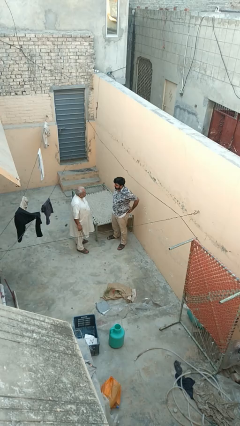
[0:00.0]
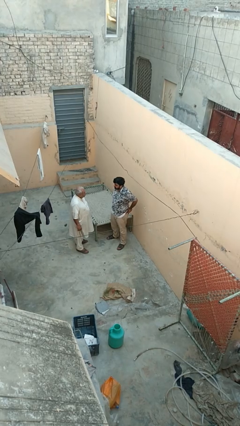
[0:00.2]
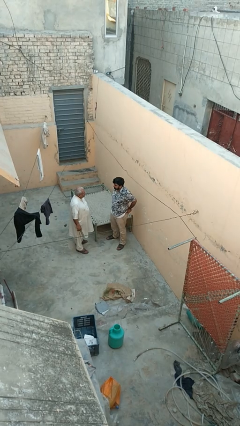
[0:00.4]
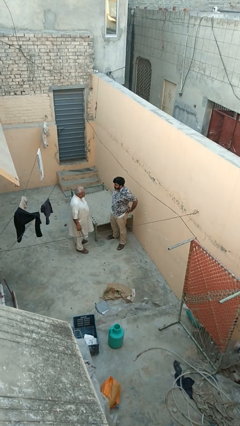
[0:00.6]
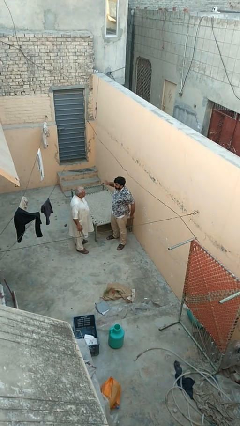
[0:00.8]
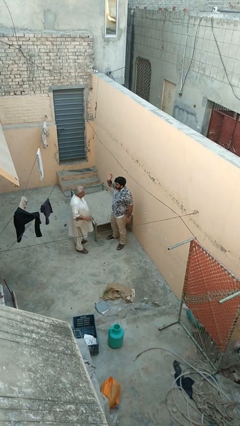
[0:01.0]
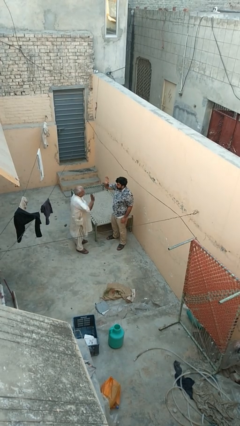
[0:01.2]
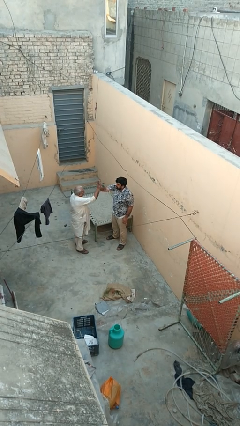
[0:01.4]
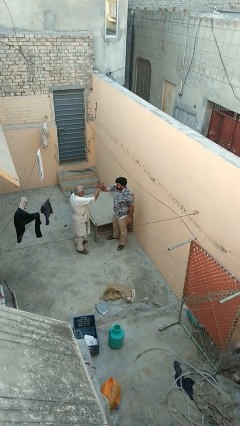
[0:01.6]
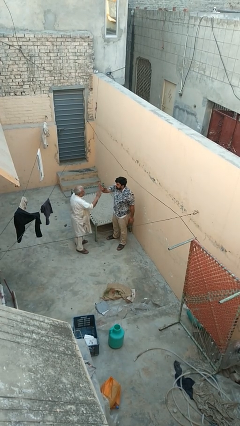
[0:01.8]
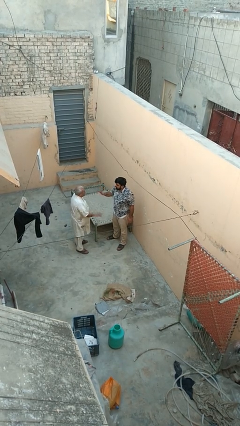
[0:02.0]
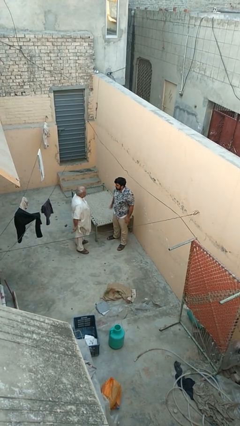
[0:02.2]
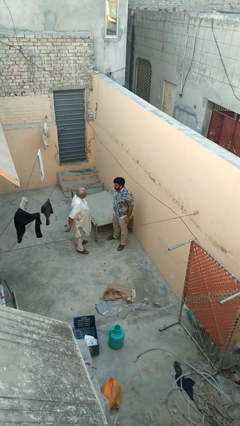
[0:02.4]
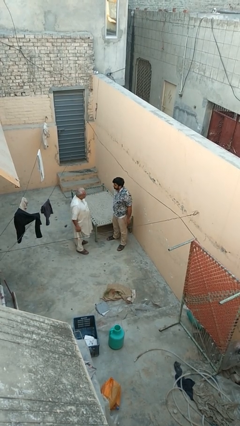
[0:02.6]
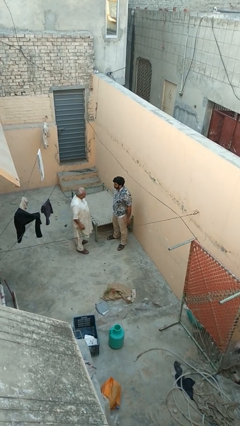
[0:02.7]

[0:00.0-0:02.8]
person highfives hand

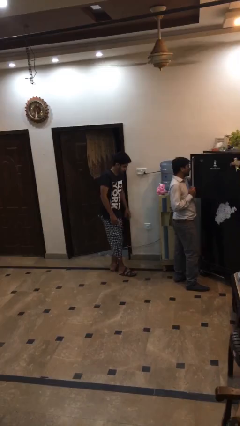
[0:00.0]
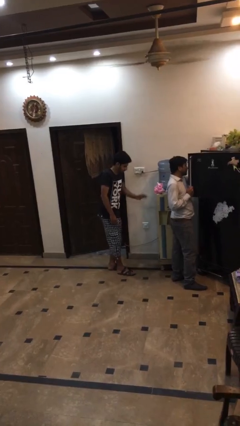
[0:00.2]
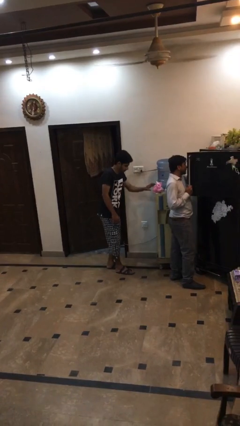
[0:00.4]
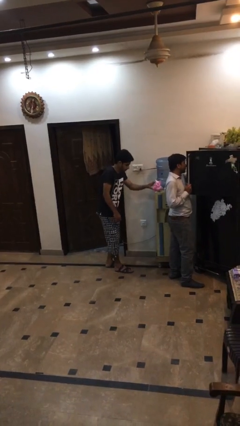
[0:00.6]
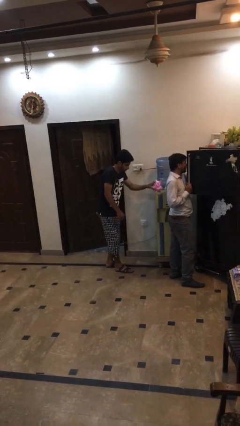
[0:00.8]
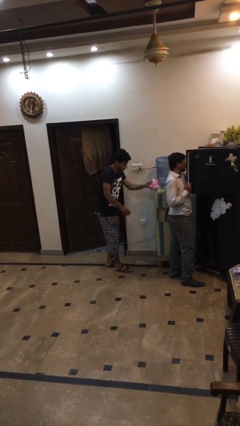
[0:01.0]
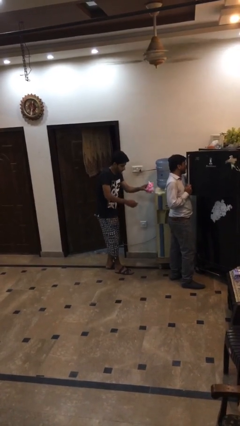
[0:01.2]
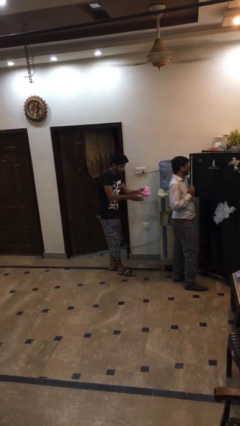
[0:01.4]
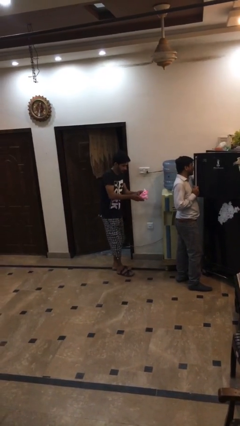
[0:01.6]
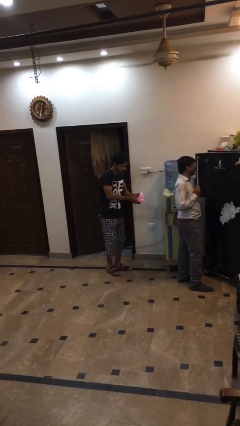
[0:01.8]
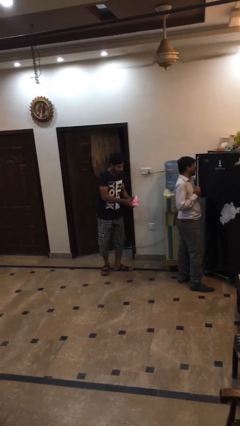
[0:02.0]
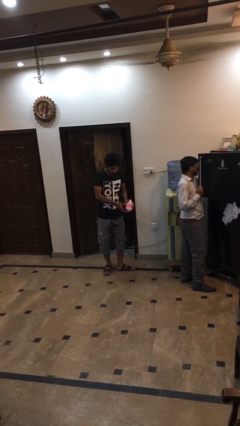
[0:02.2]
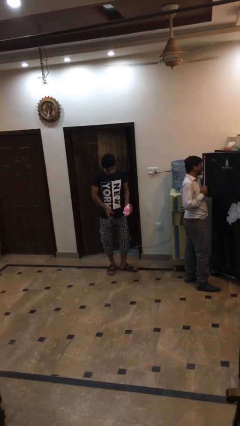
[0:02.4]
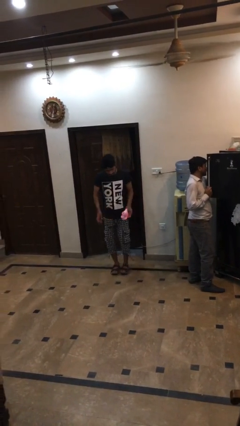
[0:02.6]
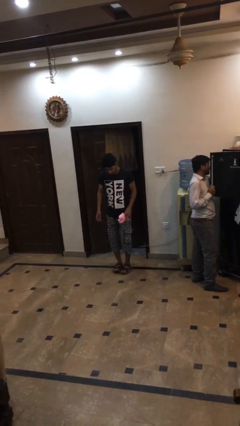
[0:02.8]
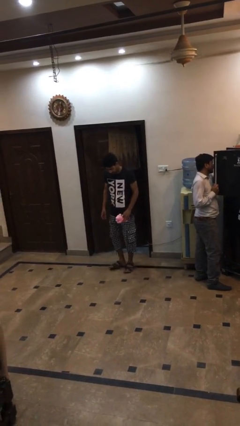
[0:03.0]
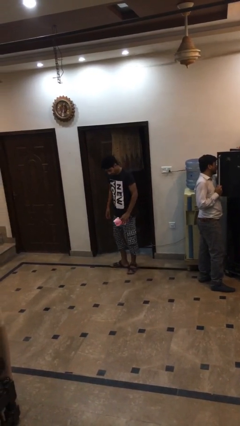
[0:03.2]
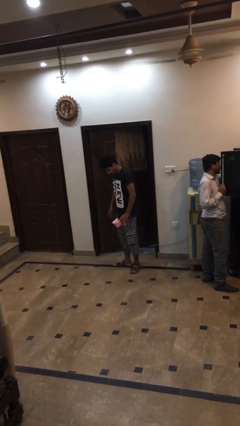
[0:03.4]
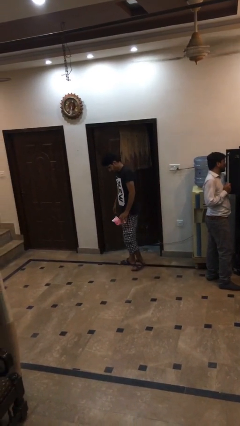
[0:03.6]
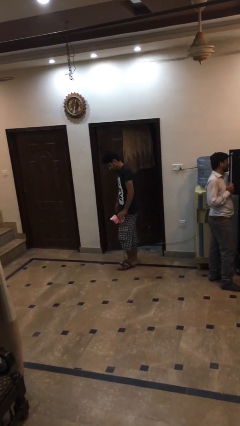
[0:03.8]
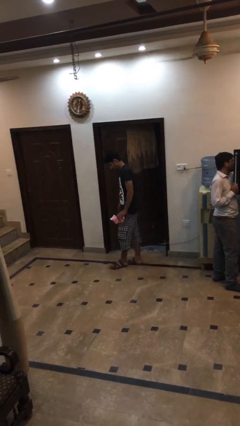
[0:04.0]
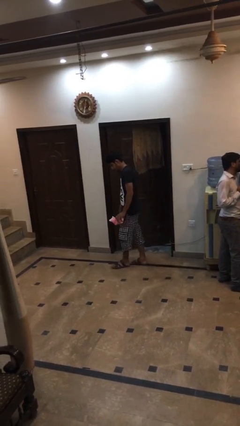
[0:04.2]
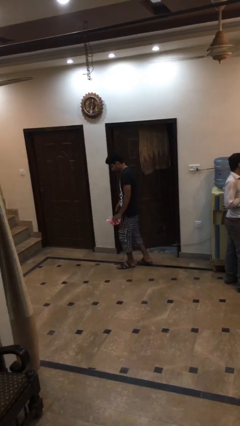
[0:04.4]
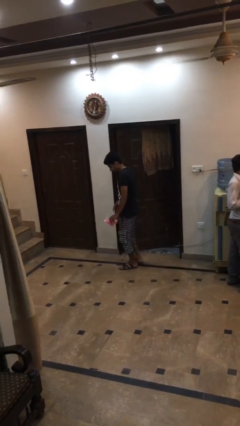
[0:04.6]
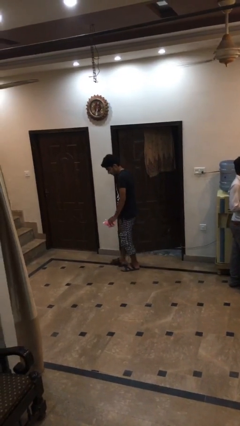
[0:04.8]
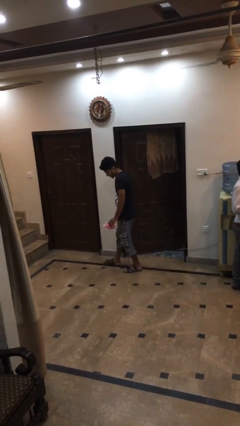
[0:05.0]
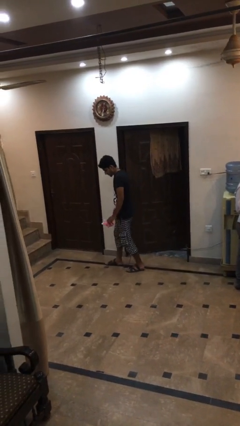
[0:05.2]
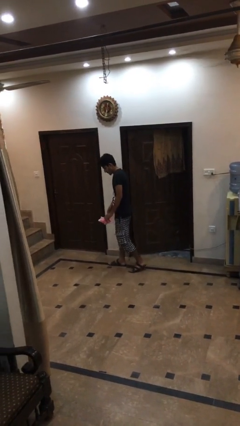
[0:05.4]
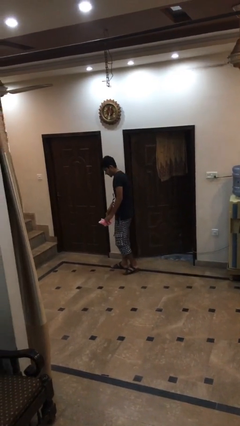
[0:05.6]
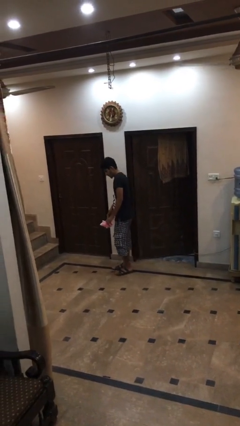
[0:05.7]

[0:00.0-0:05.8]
person steals object from person

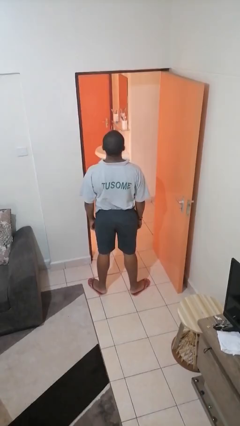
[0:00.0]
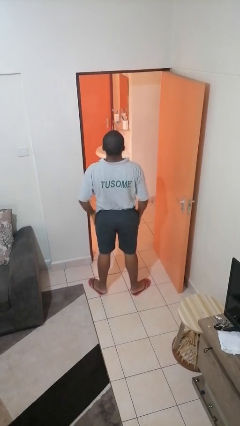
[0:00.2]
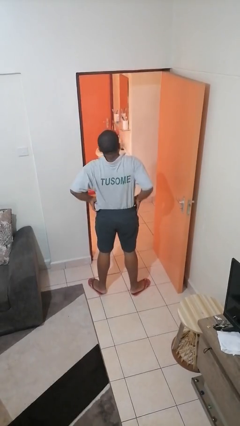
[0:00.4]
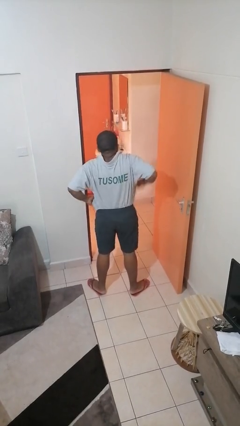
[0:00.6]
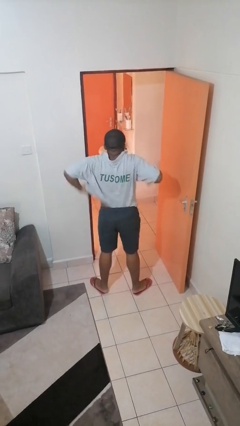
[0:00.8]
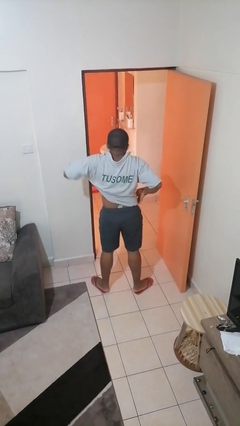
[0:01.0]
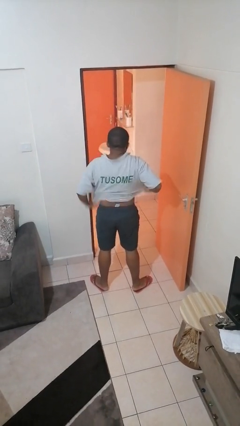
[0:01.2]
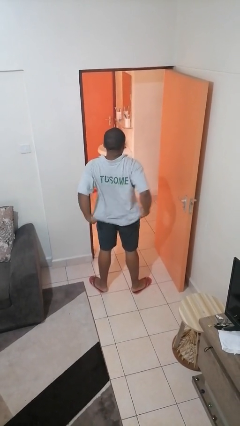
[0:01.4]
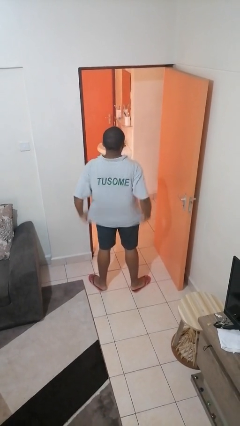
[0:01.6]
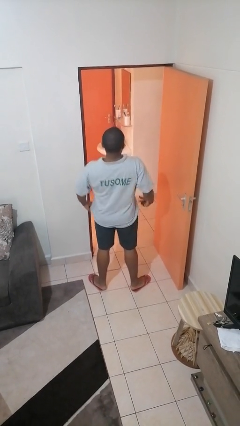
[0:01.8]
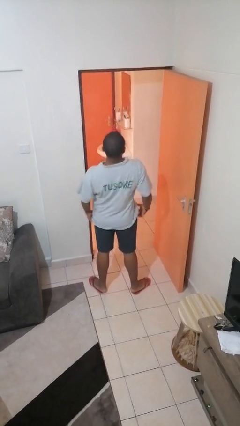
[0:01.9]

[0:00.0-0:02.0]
person untucks shirt

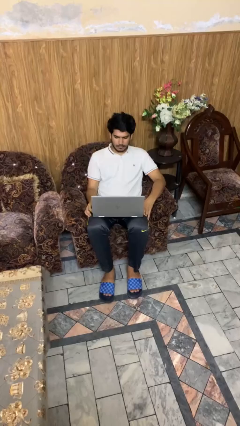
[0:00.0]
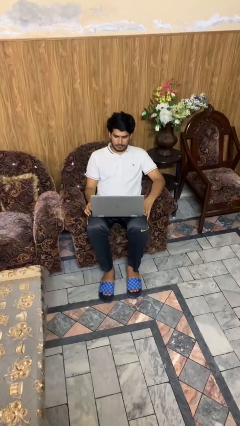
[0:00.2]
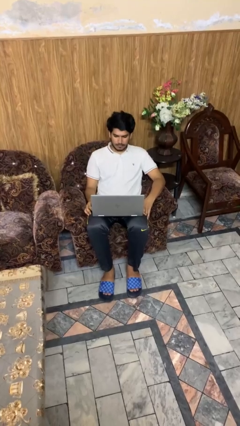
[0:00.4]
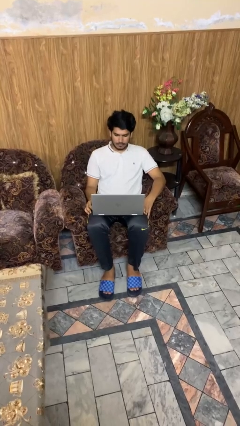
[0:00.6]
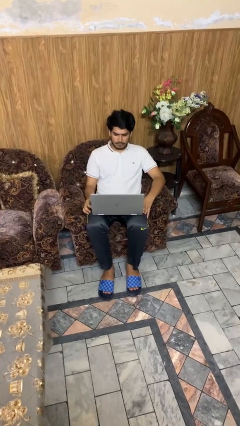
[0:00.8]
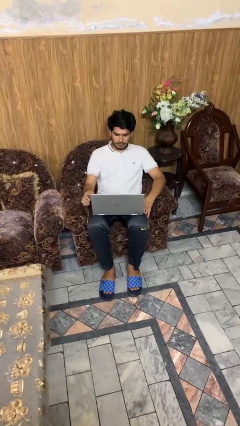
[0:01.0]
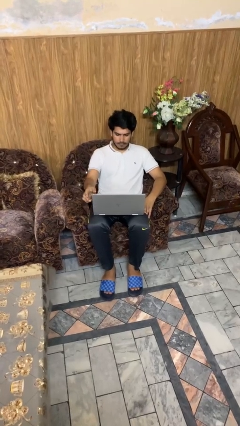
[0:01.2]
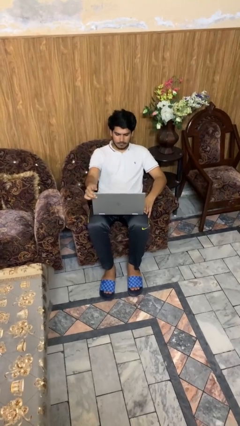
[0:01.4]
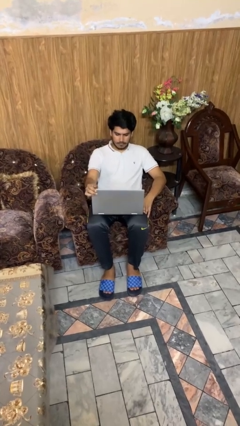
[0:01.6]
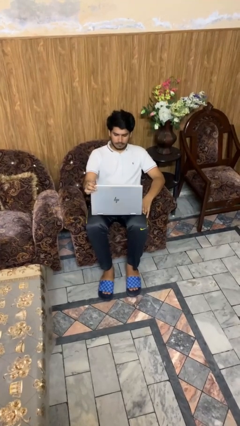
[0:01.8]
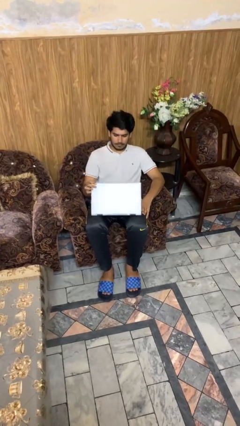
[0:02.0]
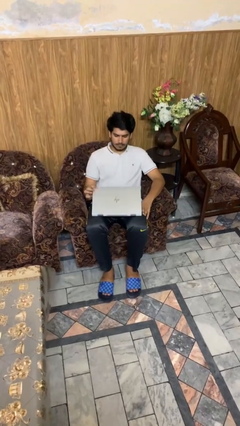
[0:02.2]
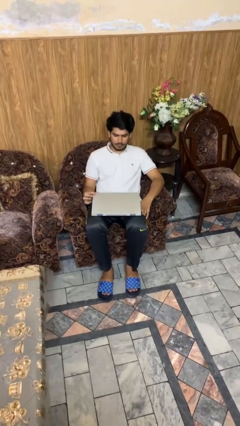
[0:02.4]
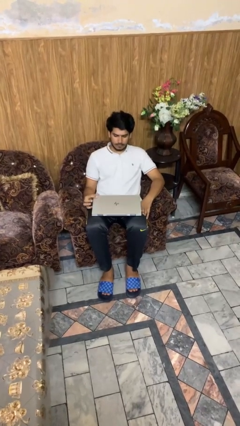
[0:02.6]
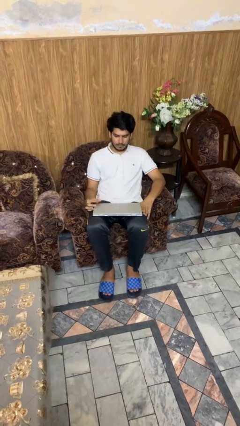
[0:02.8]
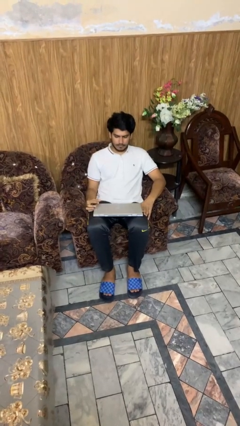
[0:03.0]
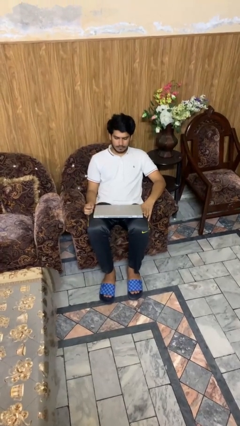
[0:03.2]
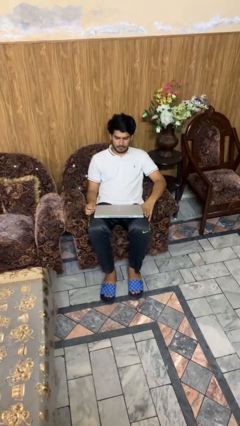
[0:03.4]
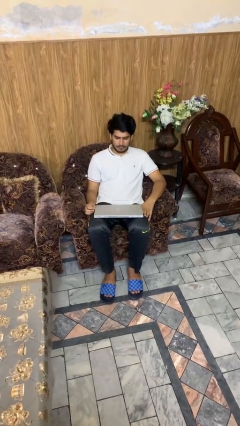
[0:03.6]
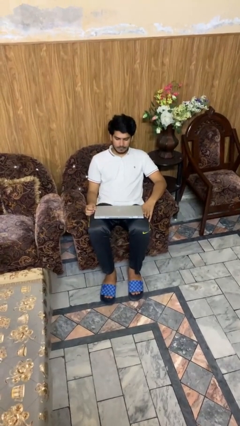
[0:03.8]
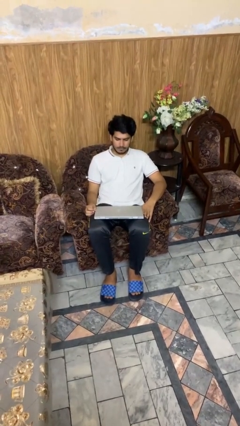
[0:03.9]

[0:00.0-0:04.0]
person closes laptop

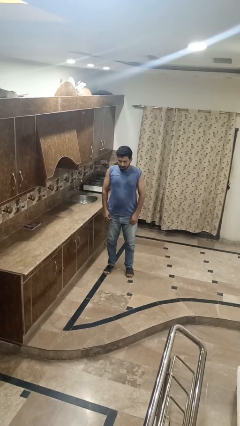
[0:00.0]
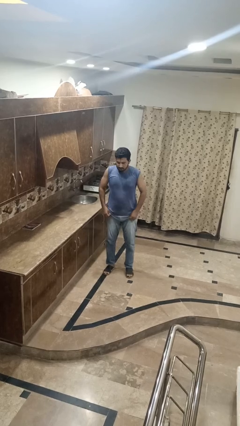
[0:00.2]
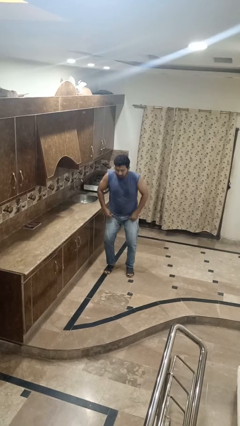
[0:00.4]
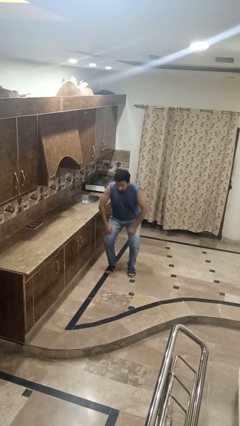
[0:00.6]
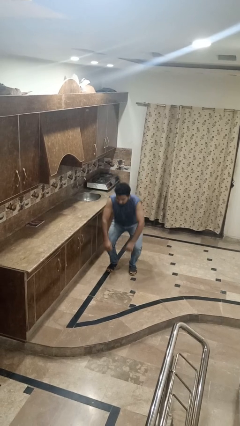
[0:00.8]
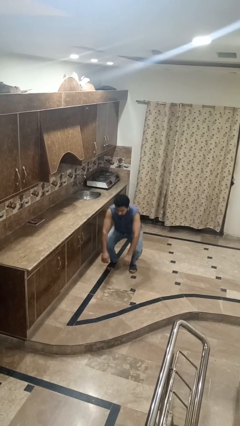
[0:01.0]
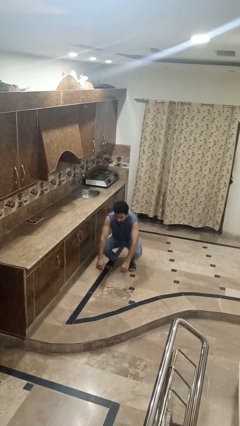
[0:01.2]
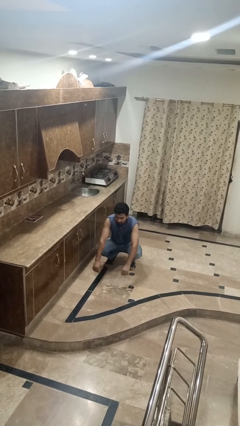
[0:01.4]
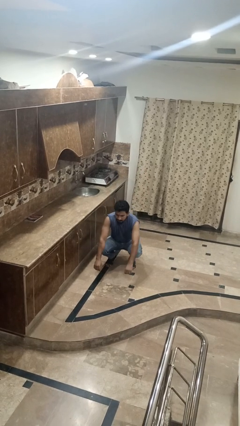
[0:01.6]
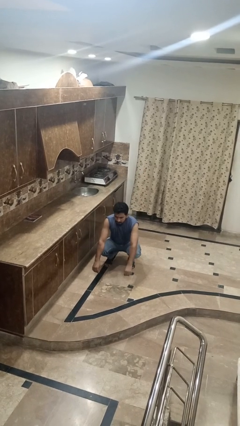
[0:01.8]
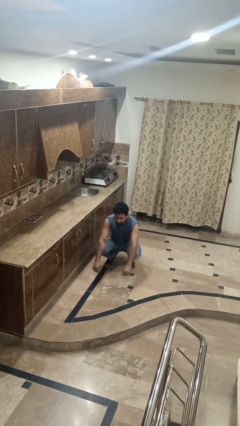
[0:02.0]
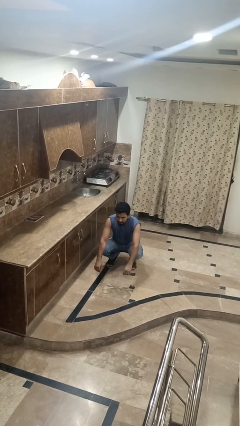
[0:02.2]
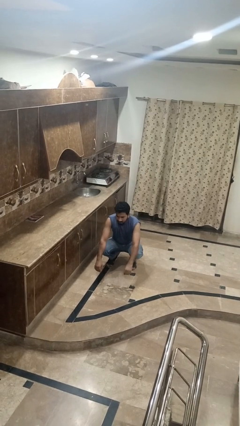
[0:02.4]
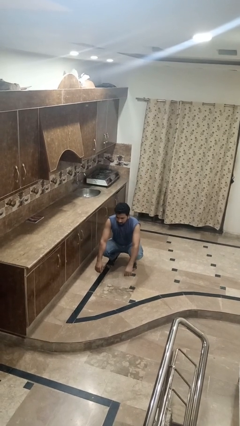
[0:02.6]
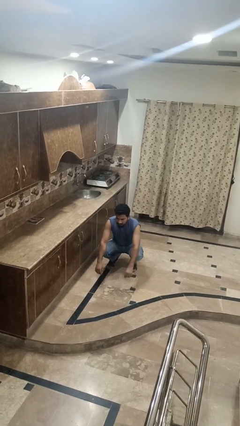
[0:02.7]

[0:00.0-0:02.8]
person squats

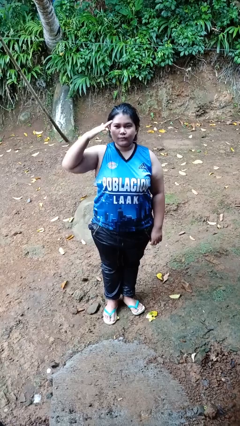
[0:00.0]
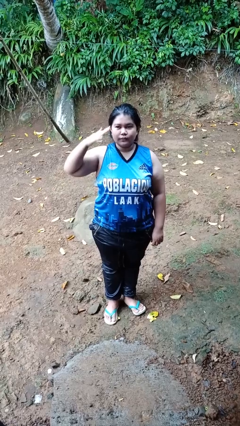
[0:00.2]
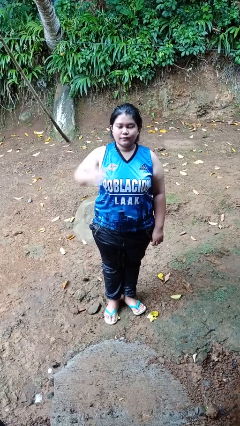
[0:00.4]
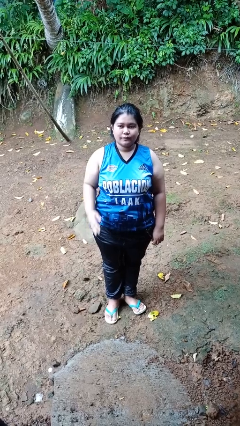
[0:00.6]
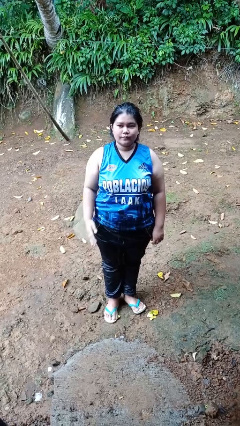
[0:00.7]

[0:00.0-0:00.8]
person salutes
